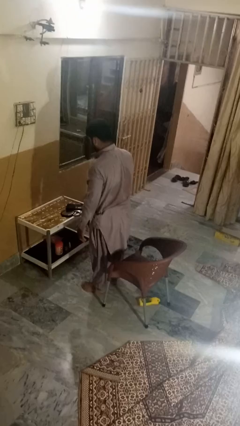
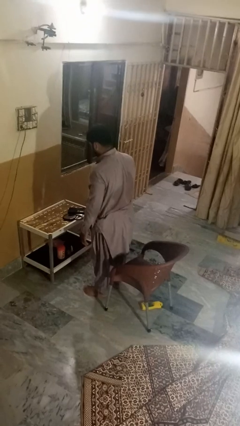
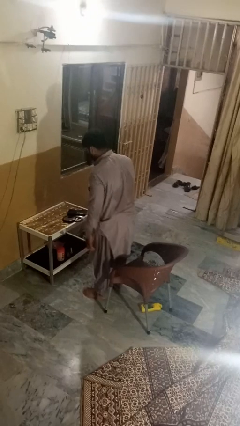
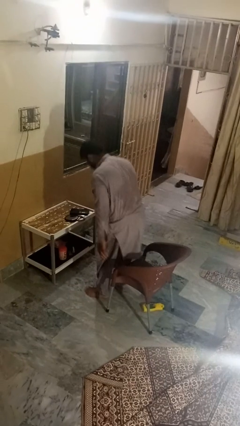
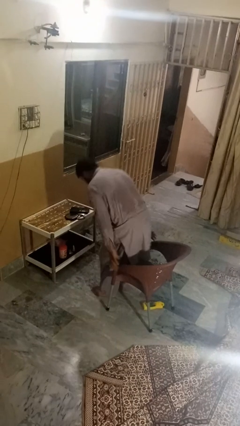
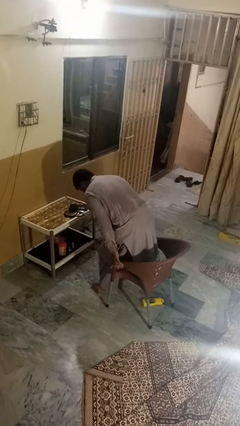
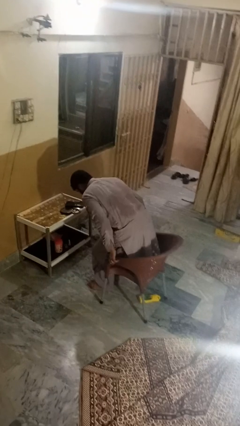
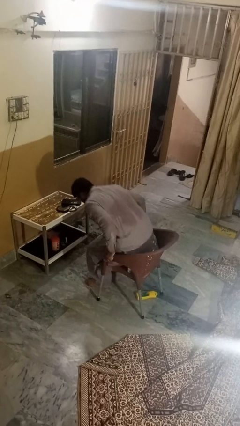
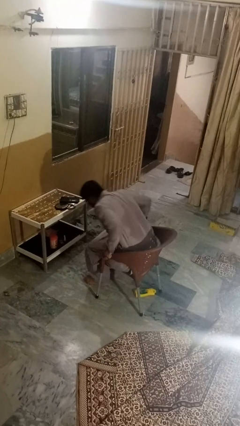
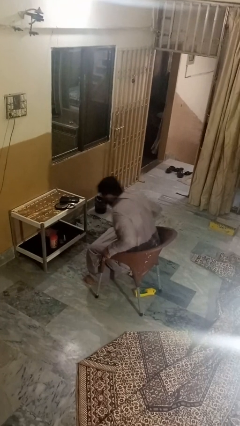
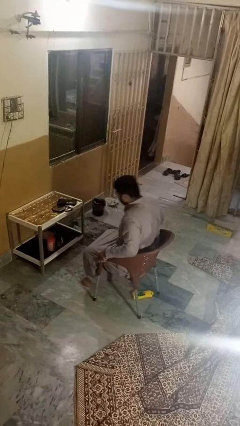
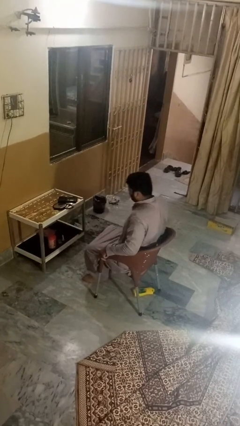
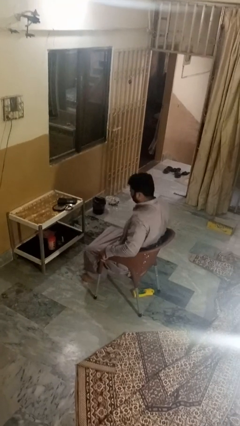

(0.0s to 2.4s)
person sits down

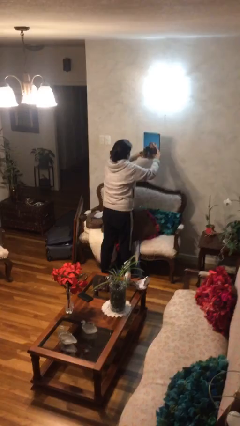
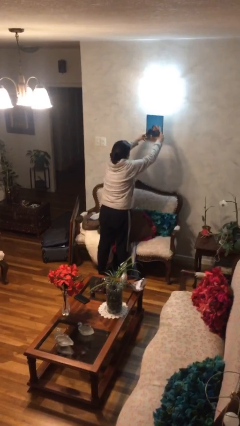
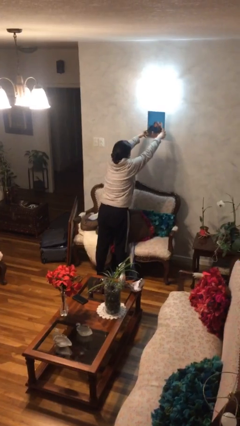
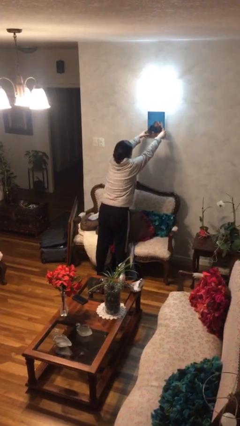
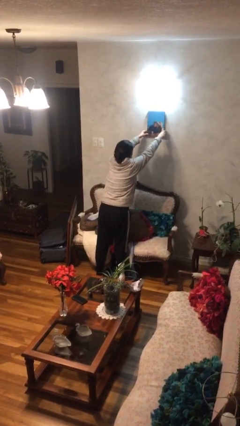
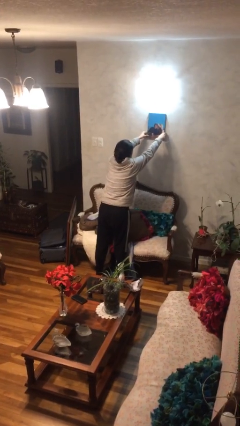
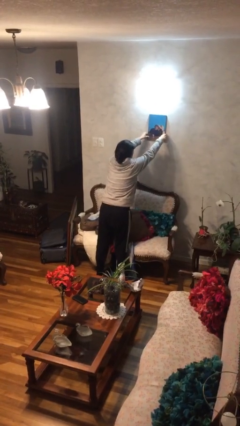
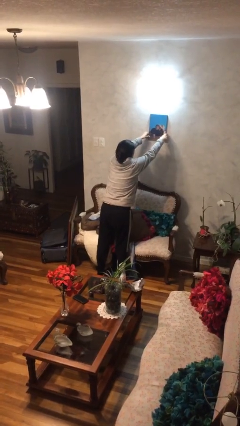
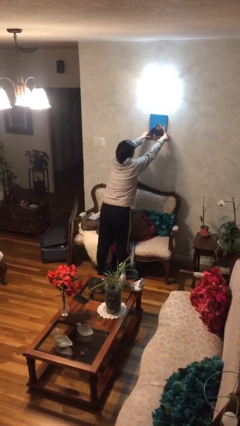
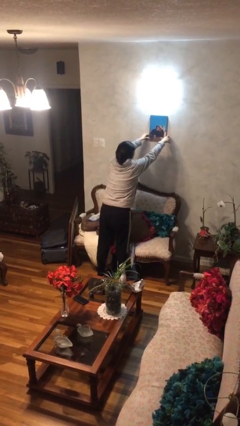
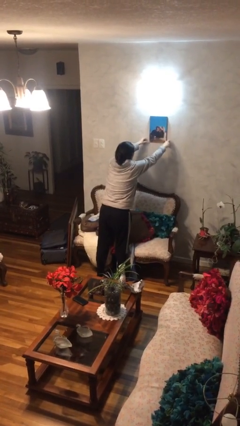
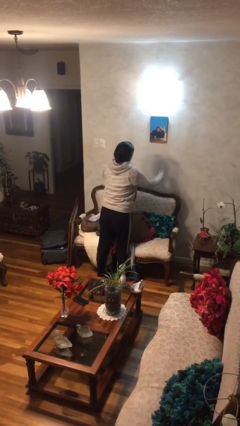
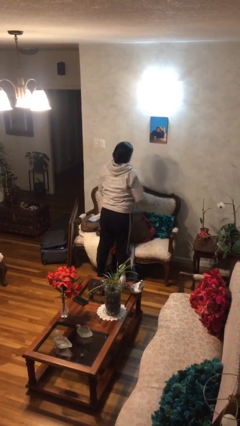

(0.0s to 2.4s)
person puts up picture frame

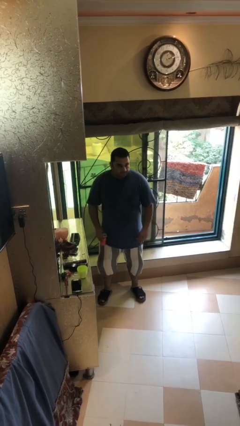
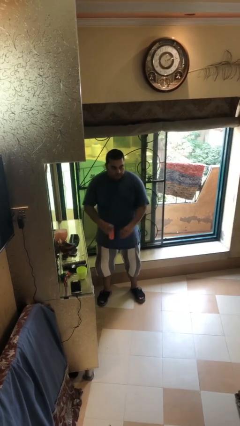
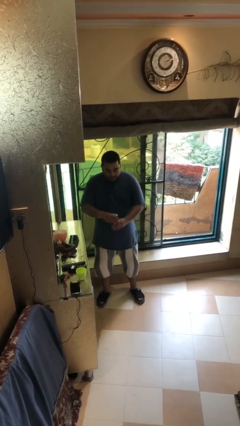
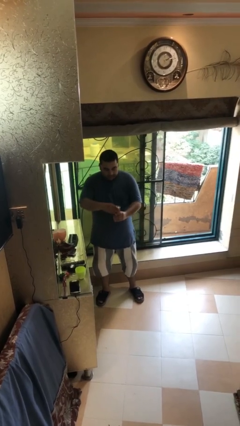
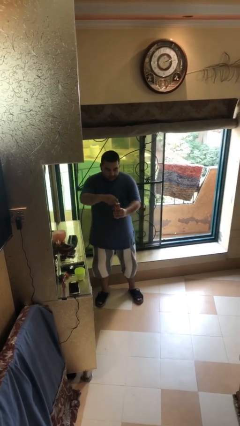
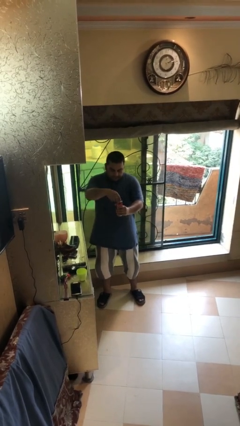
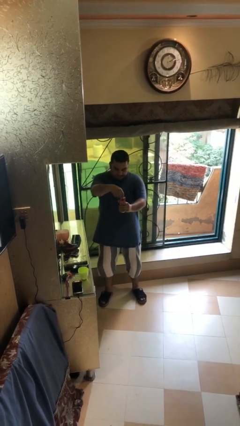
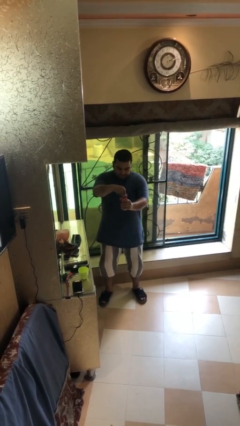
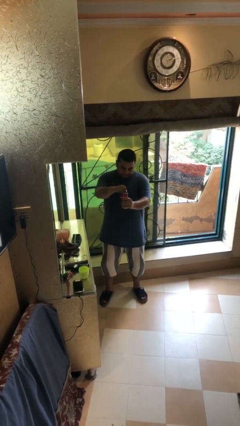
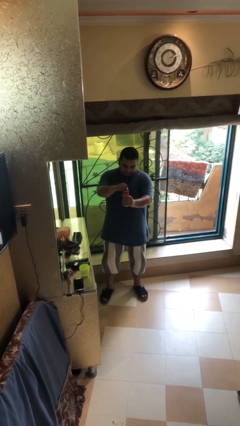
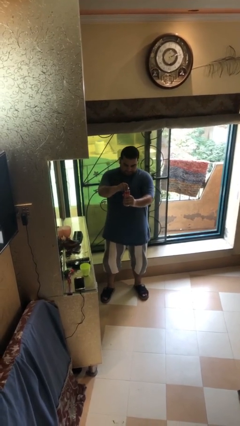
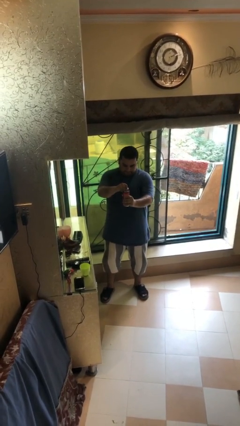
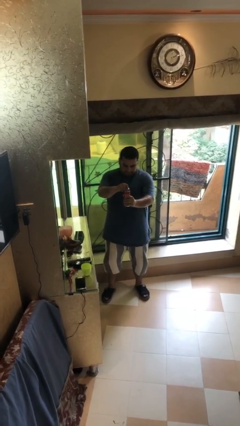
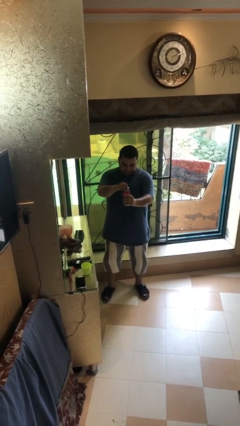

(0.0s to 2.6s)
person opens beverage can

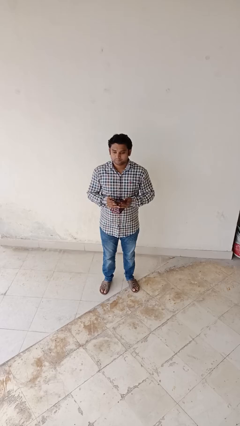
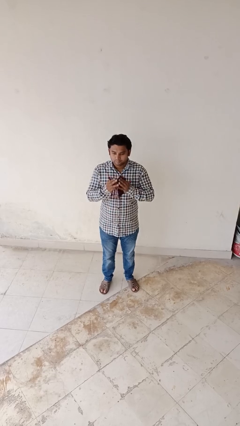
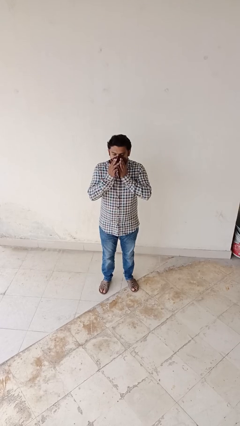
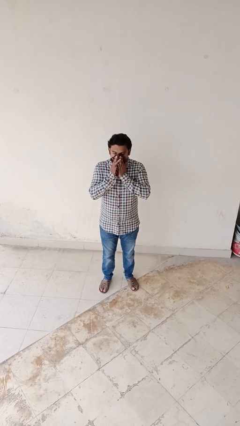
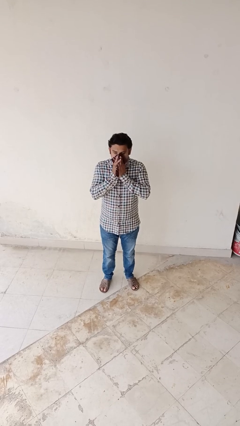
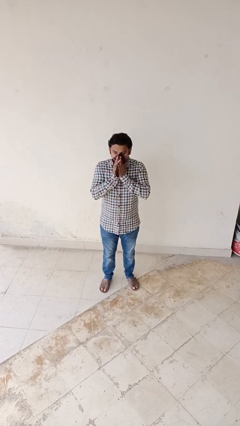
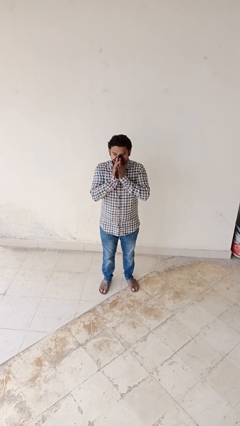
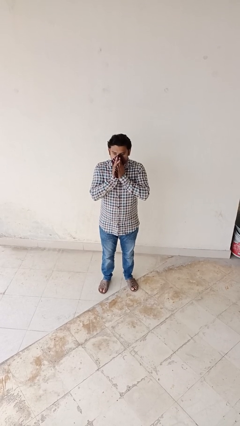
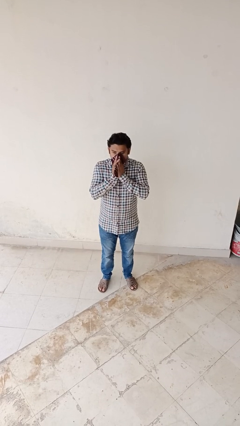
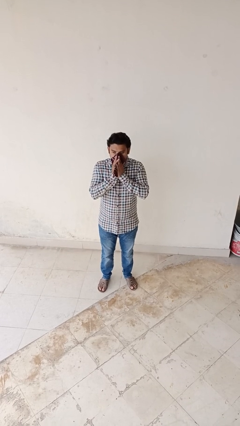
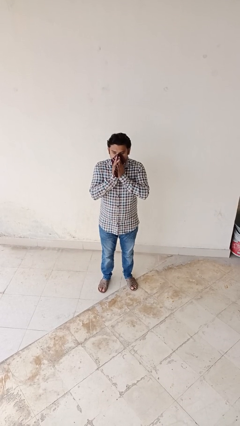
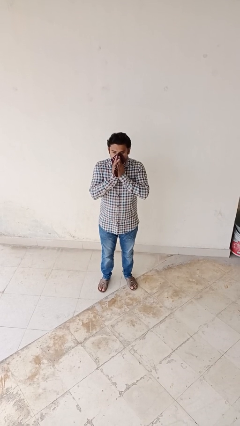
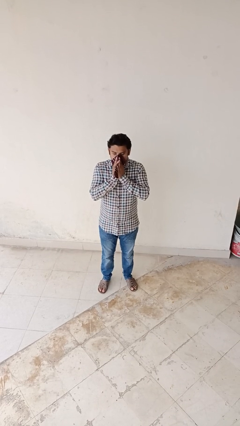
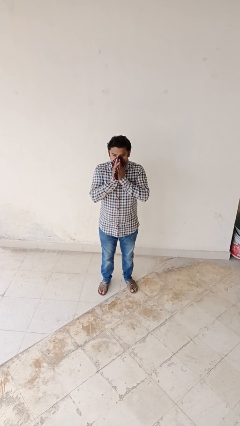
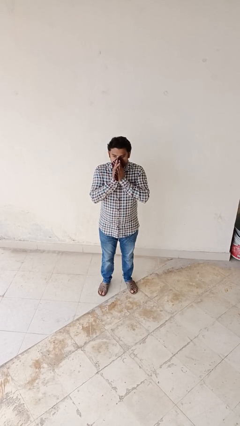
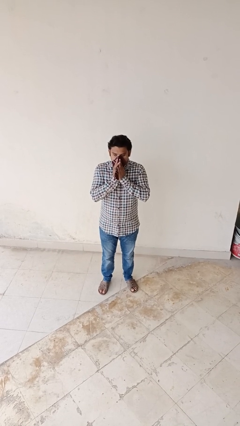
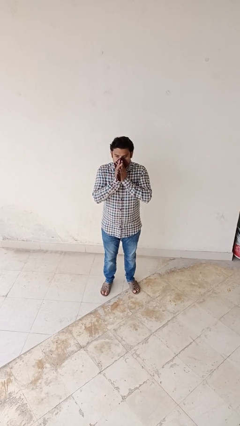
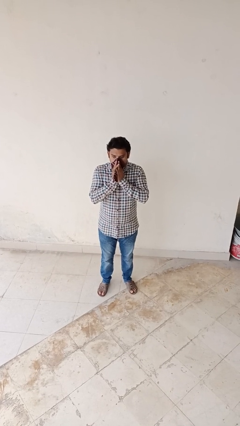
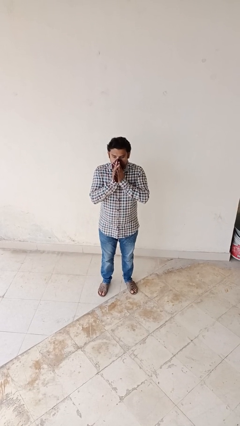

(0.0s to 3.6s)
person blows nose

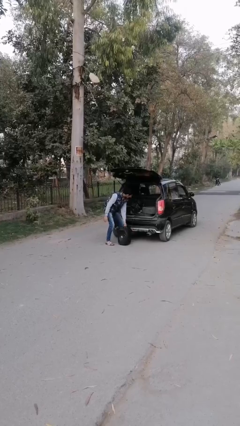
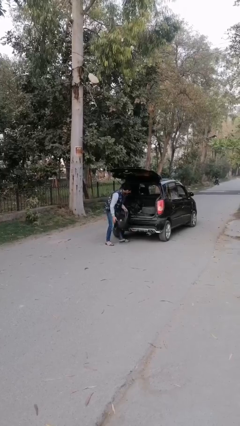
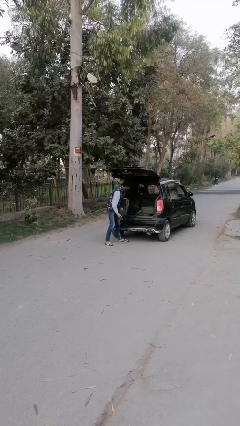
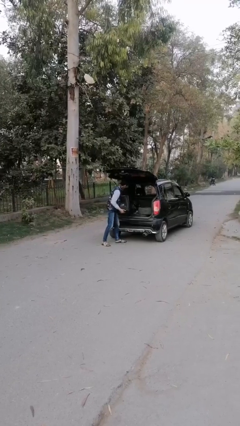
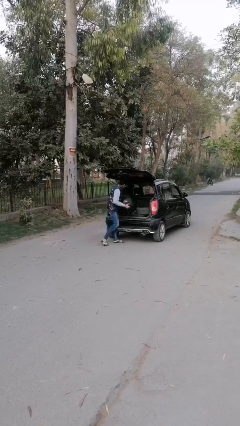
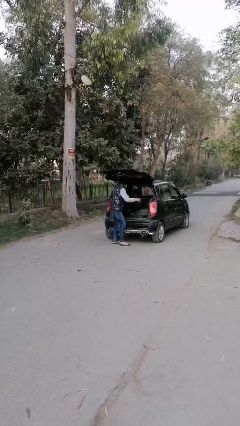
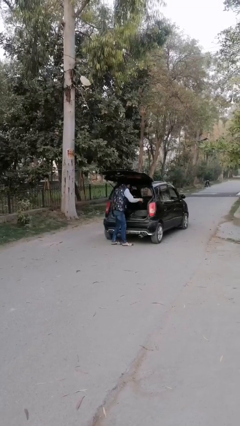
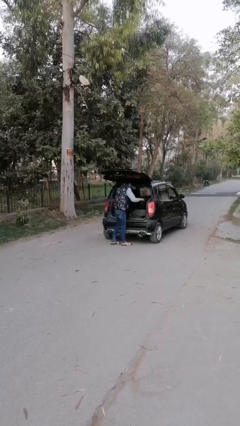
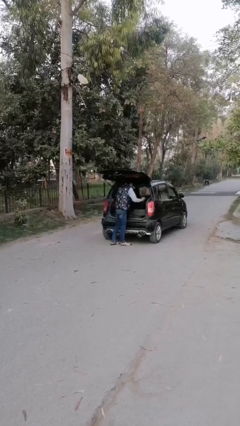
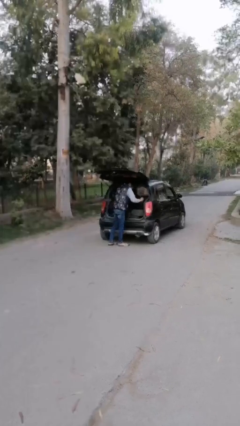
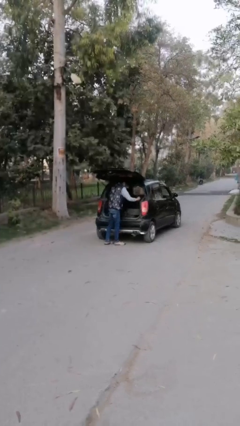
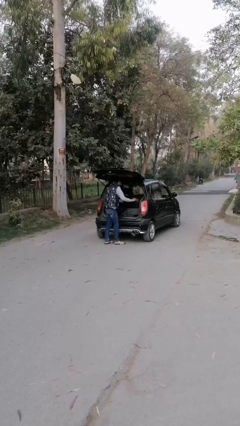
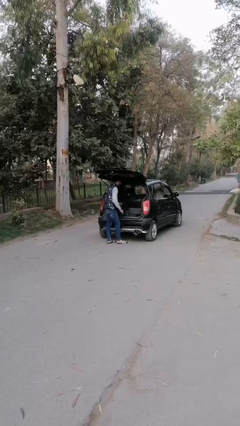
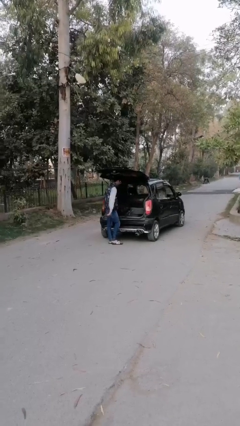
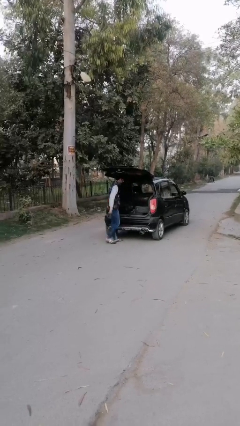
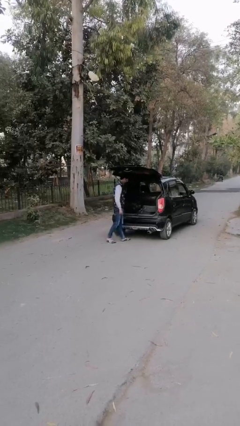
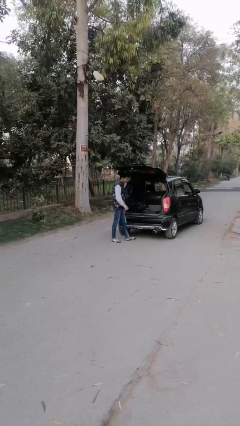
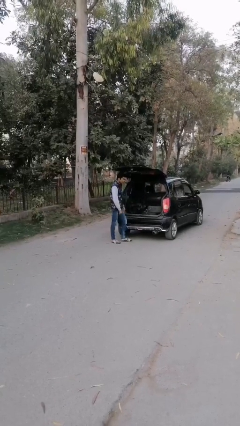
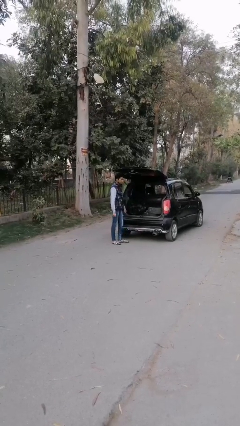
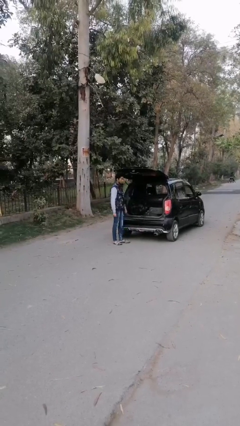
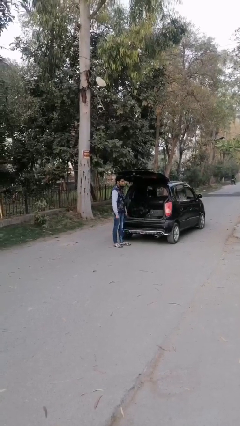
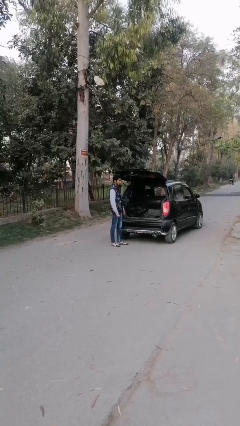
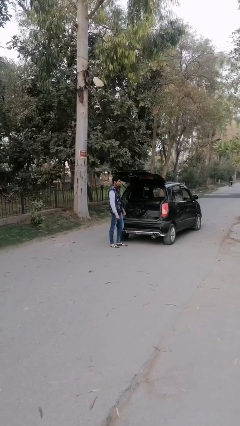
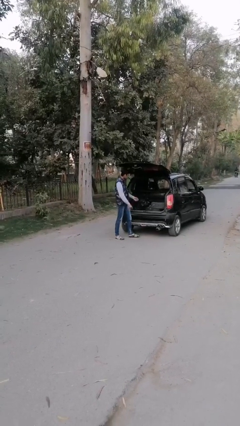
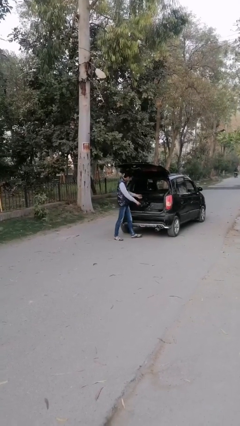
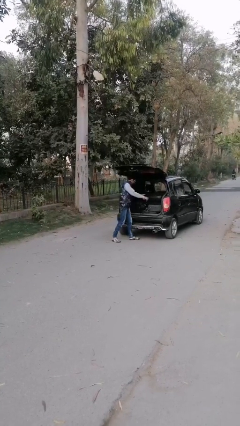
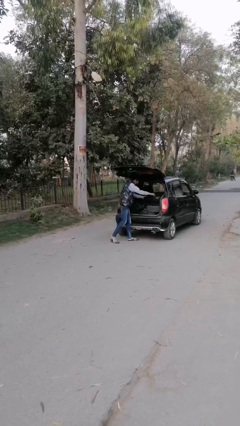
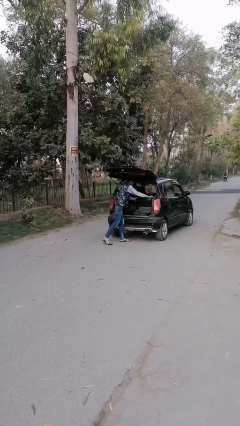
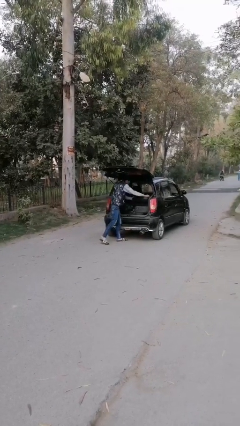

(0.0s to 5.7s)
person loads car

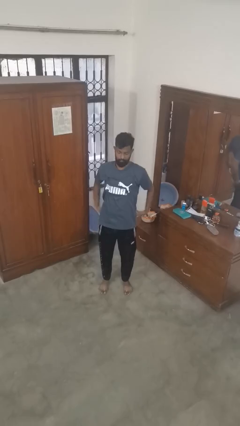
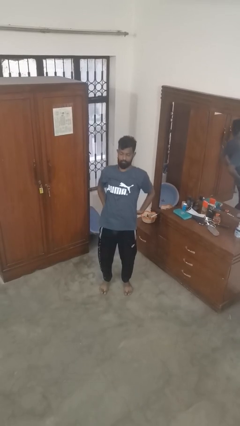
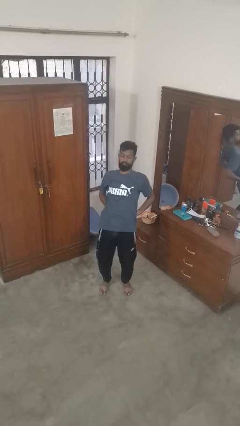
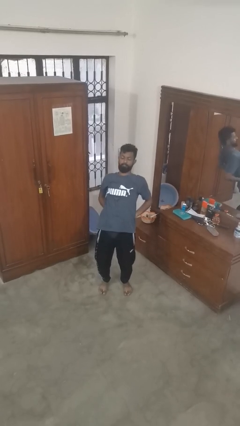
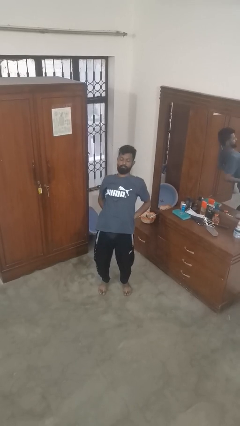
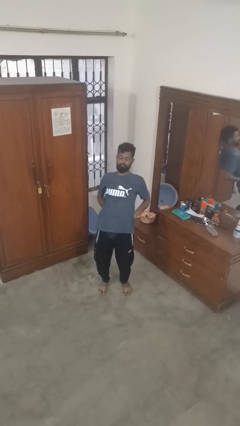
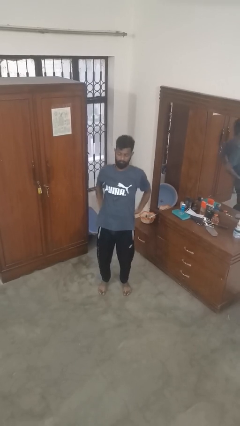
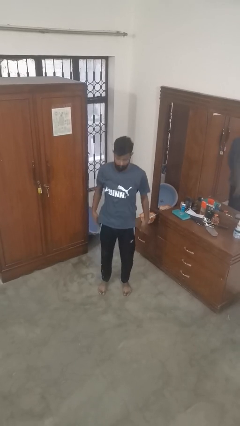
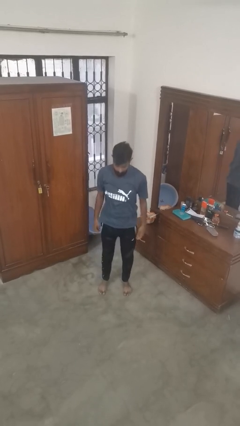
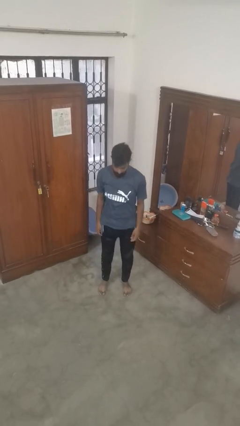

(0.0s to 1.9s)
person stretches back
